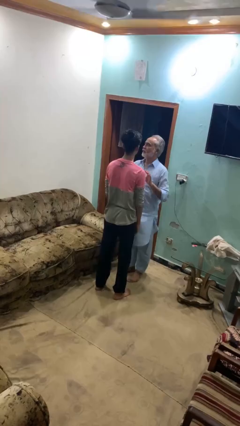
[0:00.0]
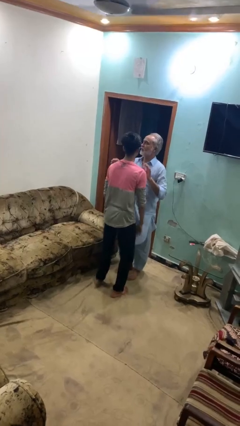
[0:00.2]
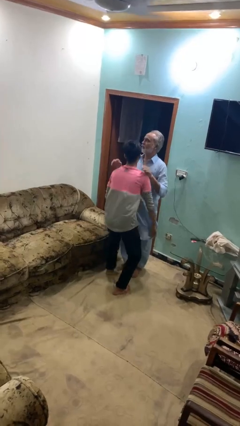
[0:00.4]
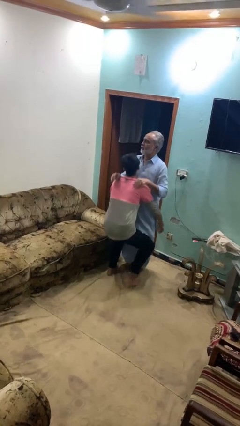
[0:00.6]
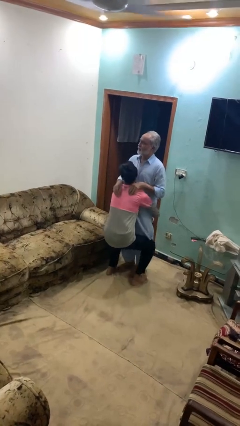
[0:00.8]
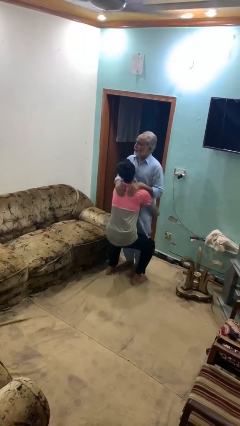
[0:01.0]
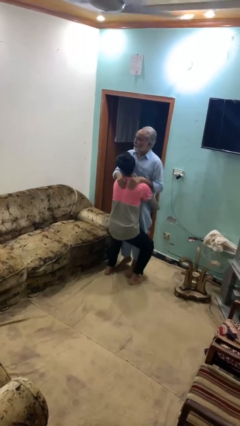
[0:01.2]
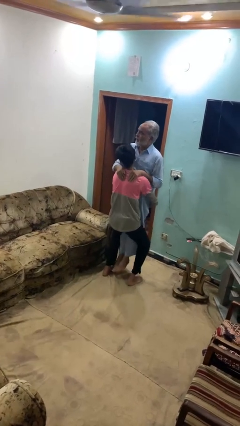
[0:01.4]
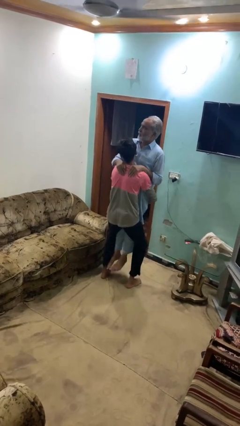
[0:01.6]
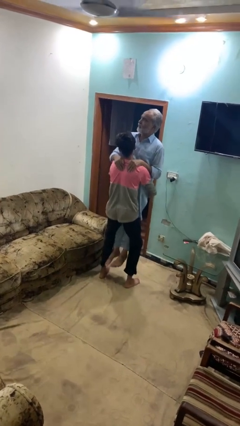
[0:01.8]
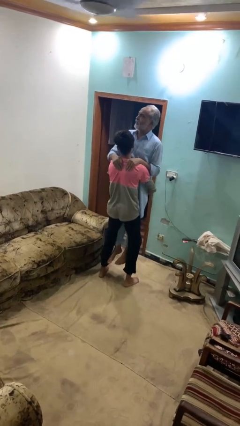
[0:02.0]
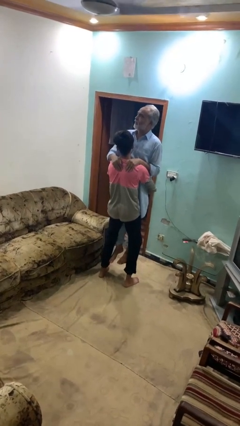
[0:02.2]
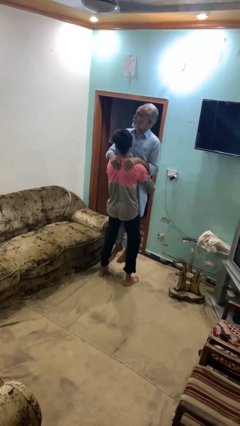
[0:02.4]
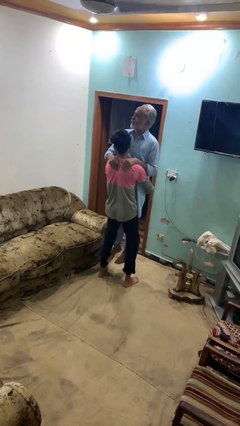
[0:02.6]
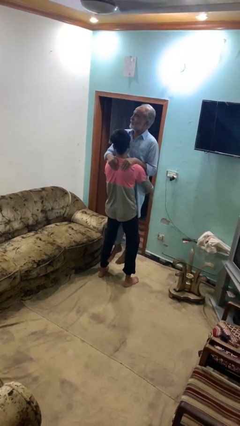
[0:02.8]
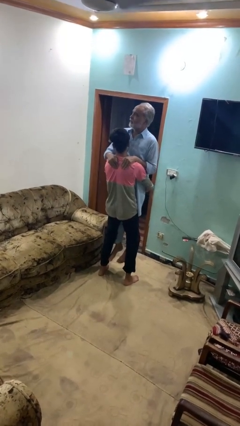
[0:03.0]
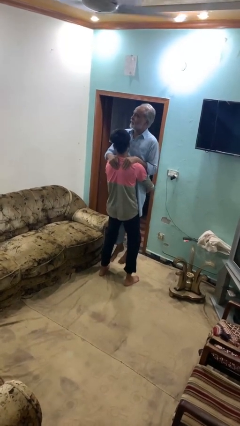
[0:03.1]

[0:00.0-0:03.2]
person picks up person

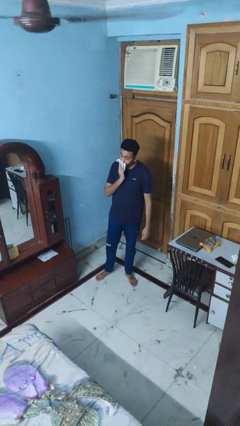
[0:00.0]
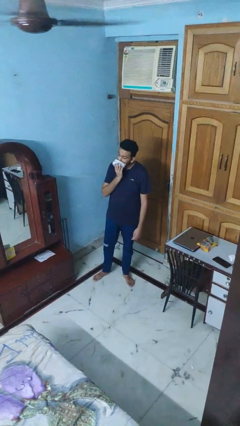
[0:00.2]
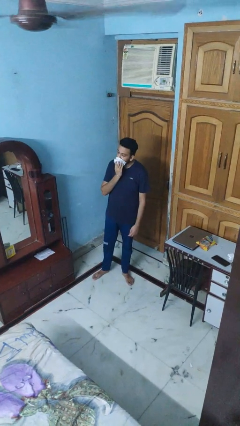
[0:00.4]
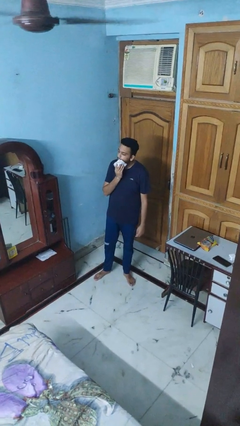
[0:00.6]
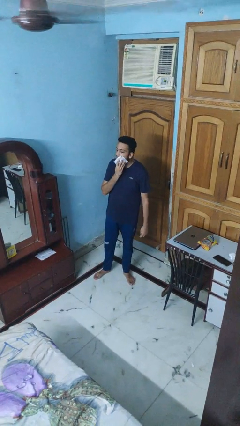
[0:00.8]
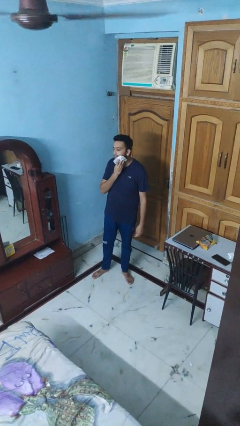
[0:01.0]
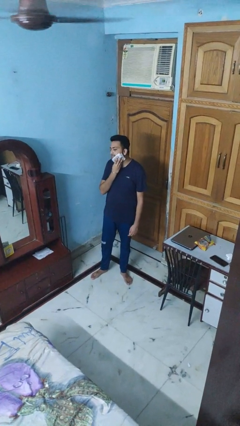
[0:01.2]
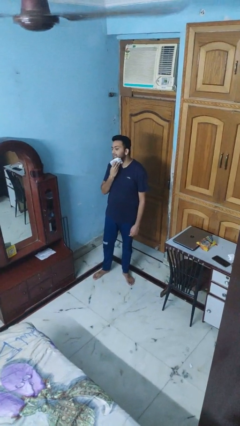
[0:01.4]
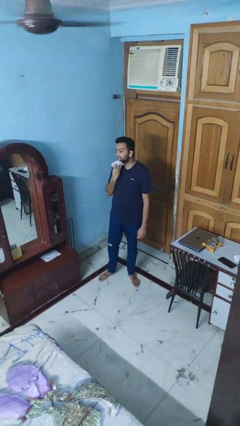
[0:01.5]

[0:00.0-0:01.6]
person wipes mouth with napkin

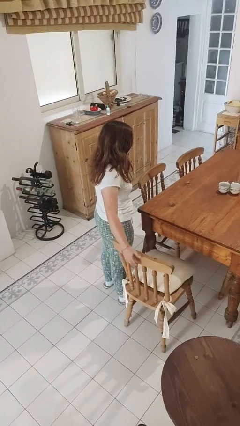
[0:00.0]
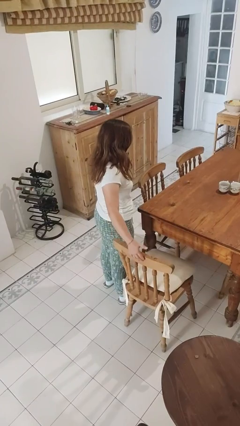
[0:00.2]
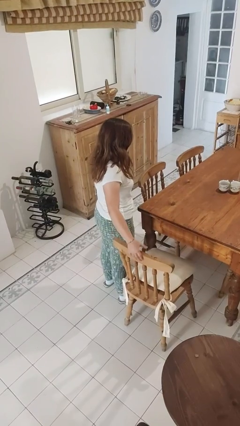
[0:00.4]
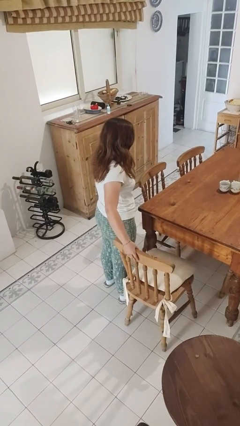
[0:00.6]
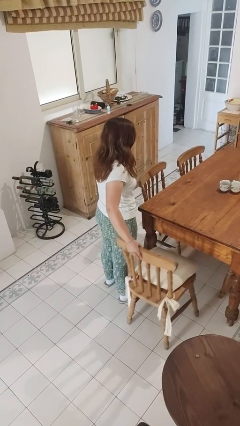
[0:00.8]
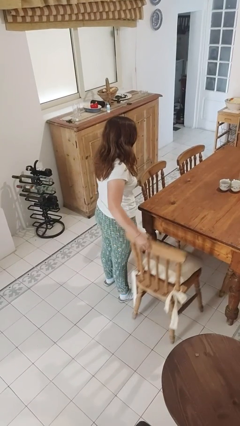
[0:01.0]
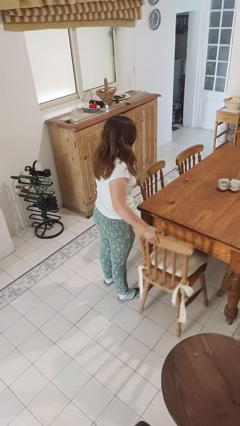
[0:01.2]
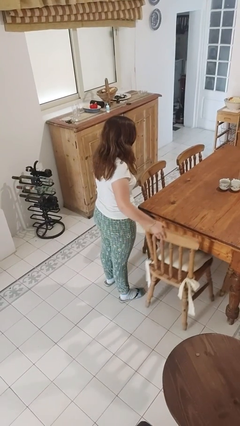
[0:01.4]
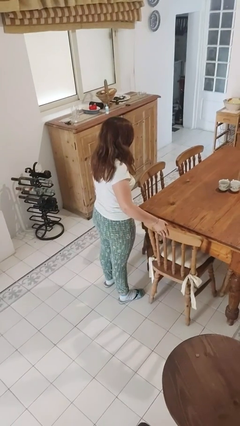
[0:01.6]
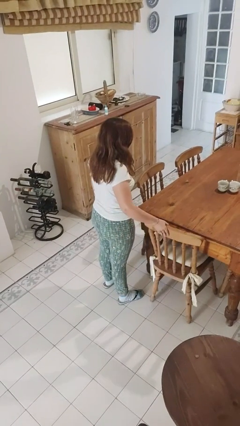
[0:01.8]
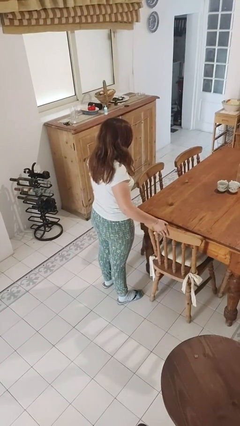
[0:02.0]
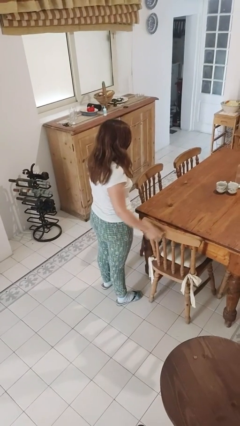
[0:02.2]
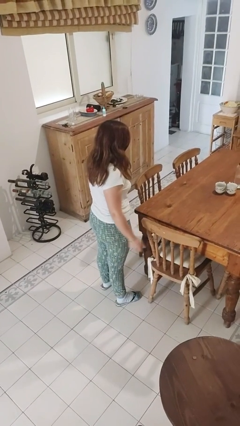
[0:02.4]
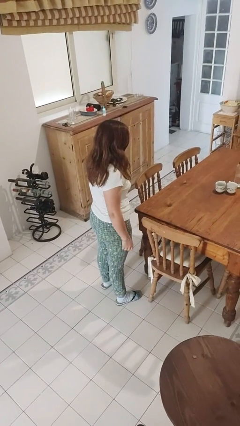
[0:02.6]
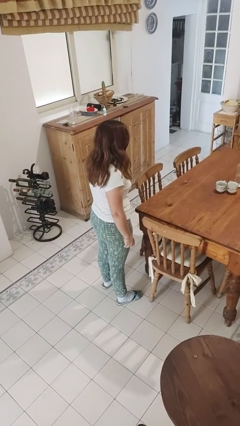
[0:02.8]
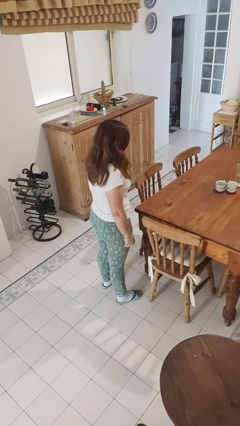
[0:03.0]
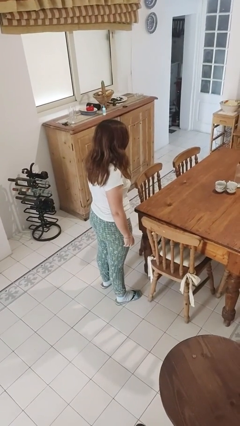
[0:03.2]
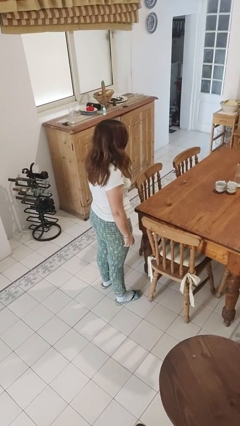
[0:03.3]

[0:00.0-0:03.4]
person pushes in chair

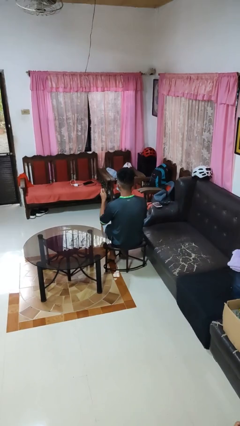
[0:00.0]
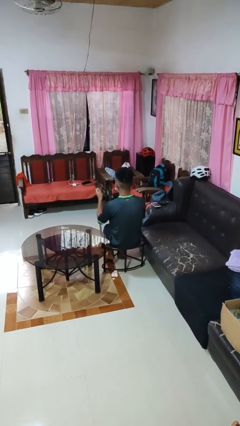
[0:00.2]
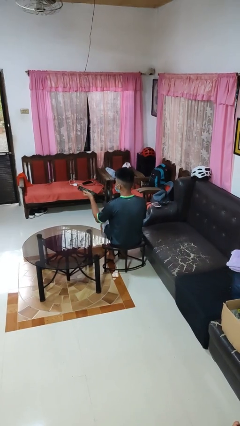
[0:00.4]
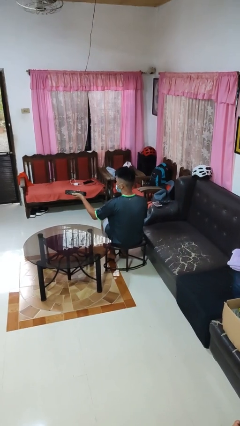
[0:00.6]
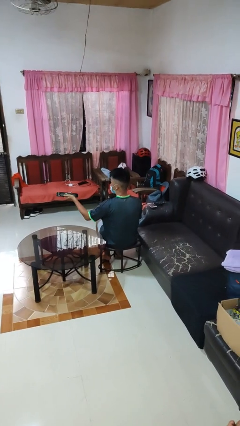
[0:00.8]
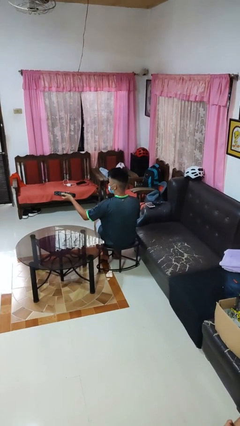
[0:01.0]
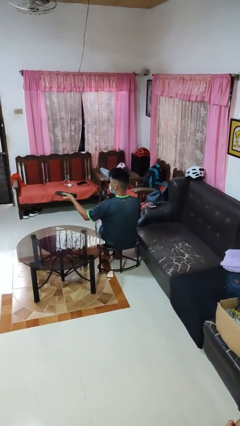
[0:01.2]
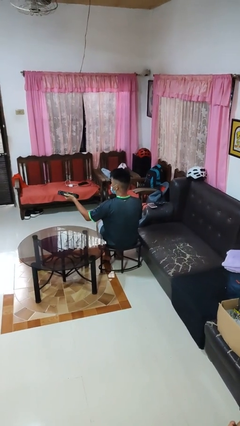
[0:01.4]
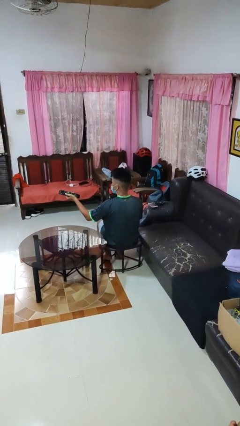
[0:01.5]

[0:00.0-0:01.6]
person uses television remote

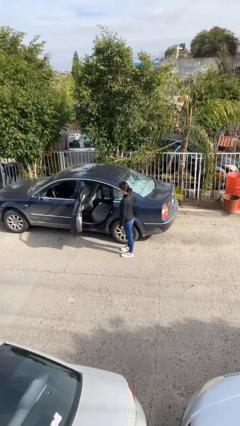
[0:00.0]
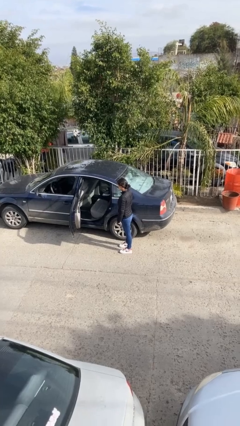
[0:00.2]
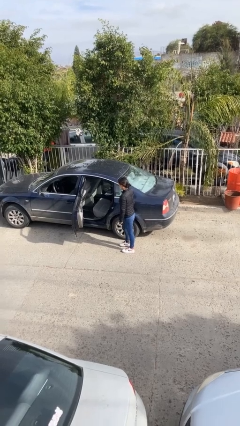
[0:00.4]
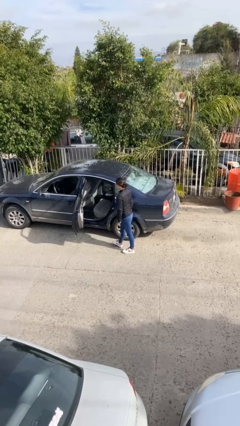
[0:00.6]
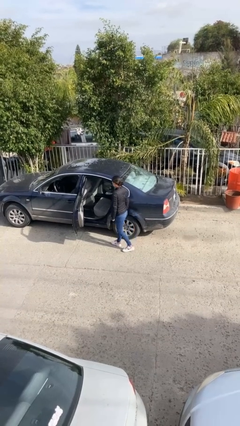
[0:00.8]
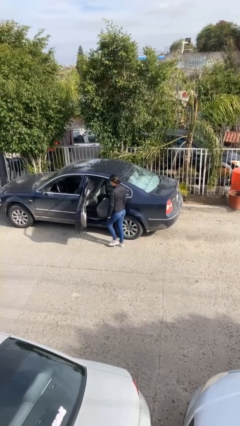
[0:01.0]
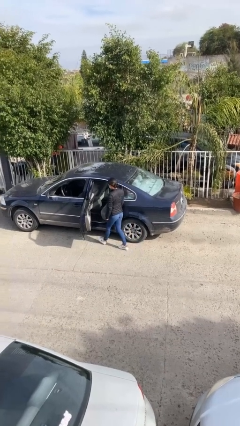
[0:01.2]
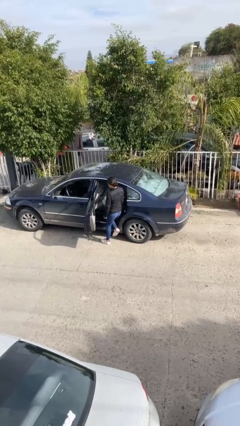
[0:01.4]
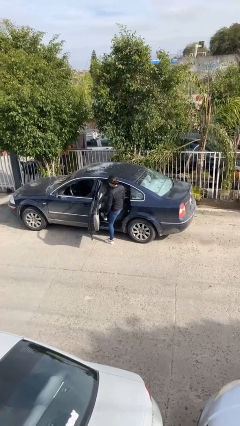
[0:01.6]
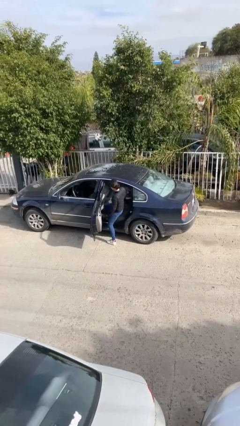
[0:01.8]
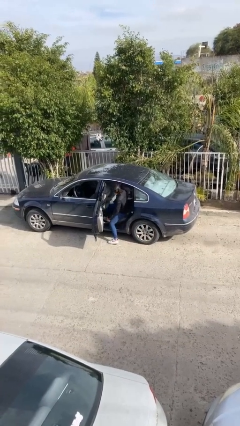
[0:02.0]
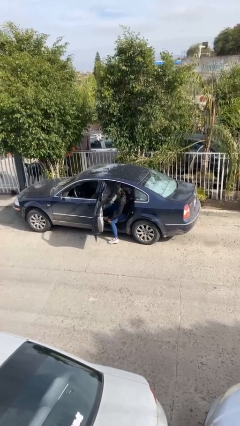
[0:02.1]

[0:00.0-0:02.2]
person enters car

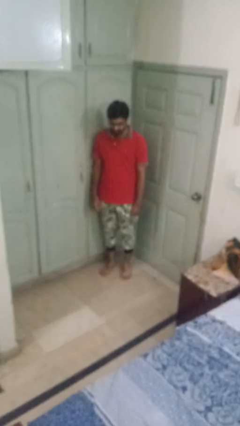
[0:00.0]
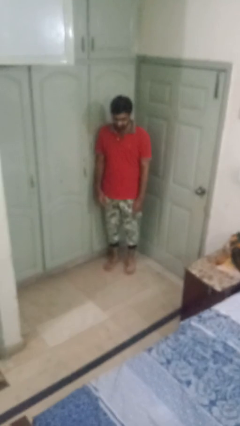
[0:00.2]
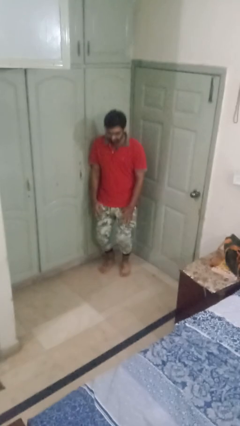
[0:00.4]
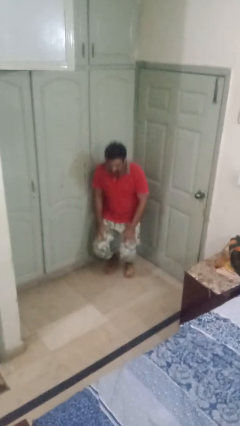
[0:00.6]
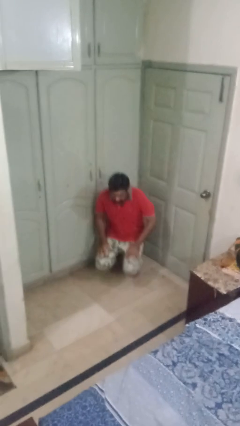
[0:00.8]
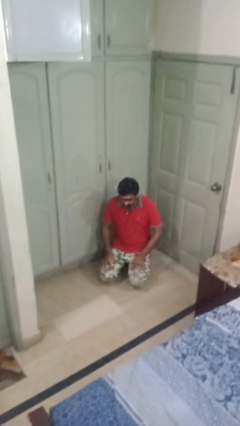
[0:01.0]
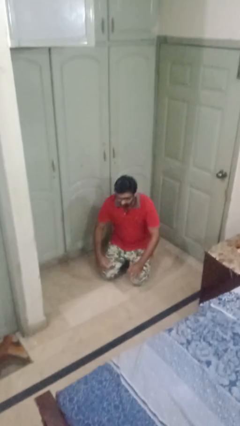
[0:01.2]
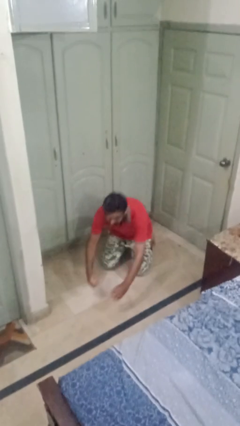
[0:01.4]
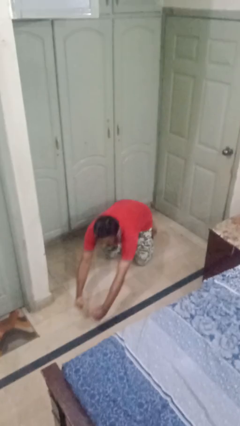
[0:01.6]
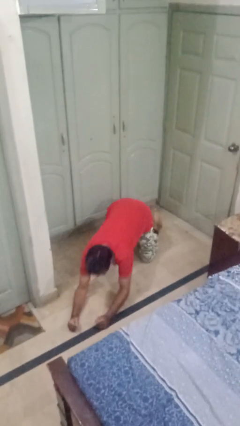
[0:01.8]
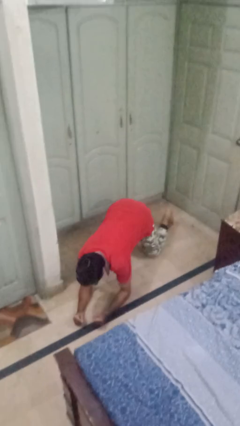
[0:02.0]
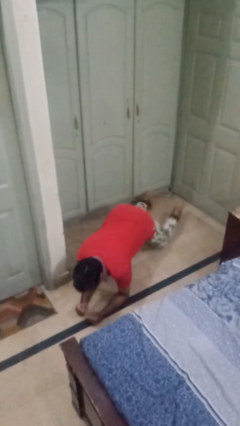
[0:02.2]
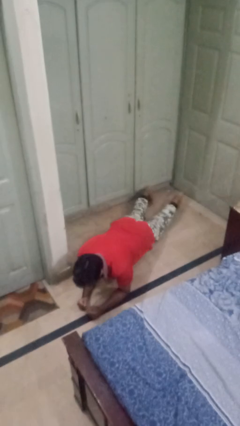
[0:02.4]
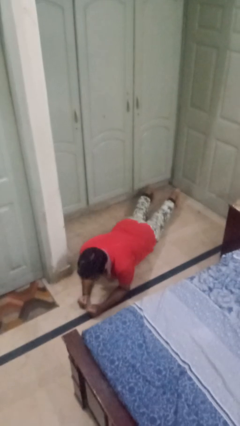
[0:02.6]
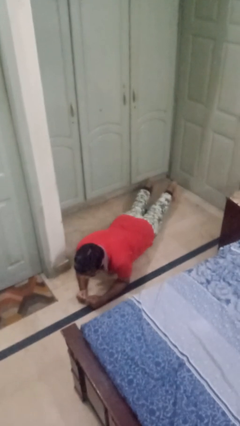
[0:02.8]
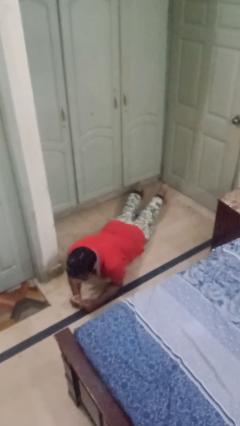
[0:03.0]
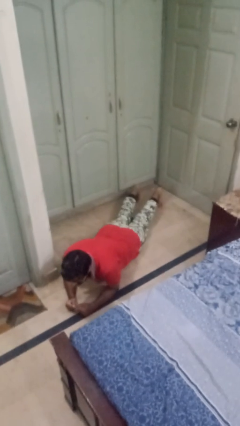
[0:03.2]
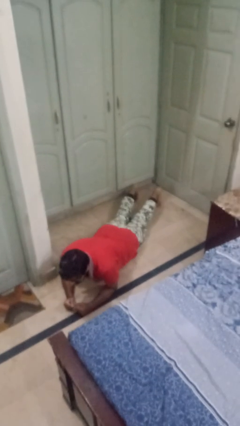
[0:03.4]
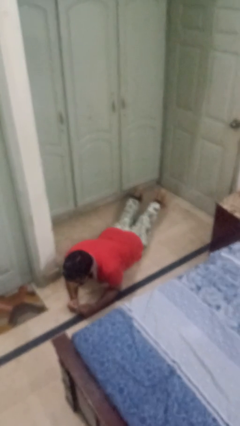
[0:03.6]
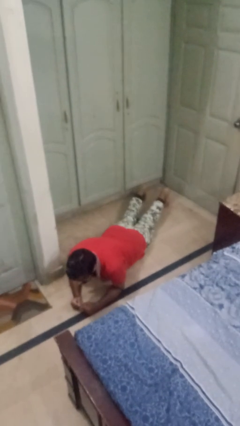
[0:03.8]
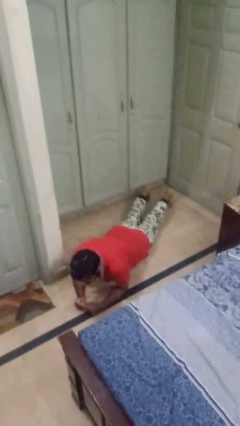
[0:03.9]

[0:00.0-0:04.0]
person exercises with plank

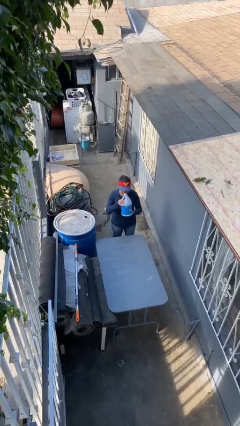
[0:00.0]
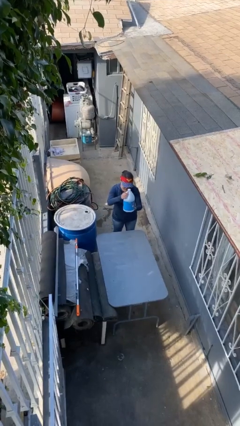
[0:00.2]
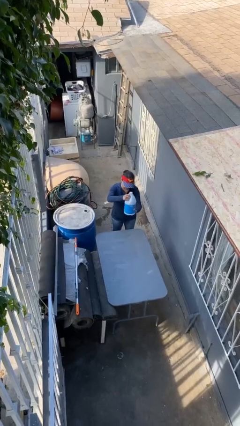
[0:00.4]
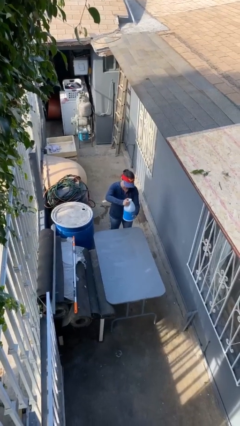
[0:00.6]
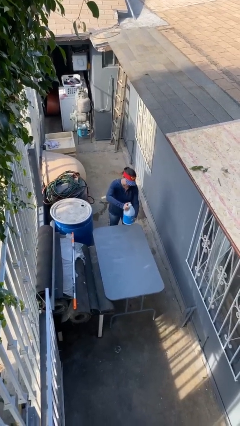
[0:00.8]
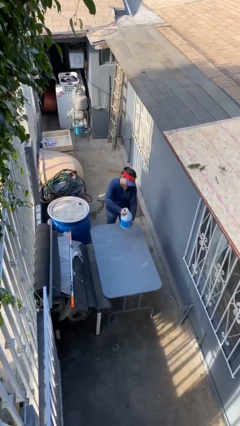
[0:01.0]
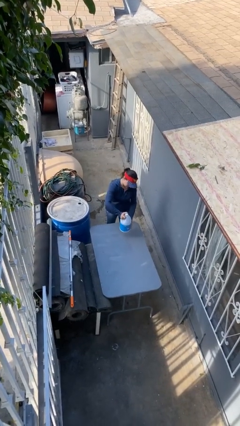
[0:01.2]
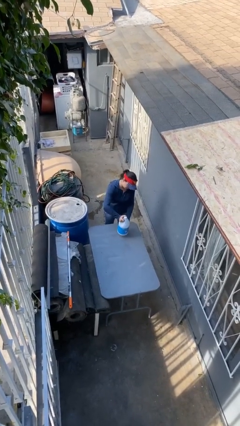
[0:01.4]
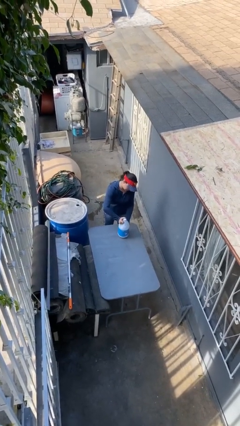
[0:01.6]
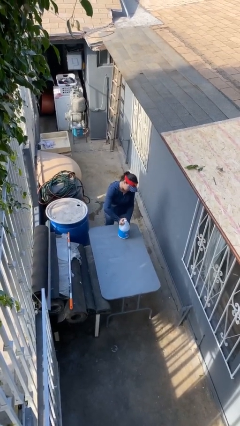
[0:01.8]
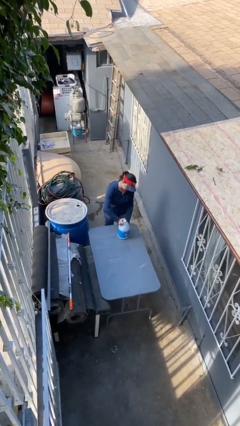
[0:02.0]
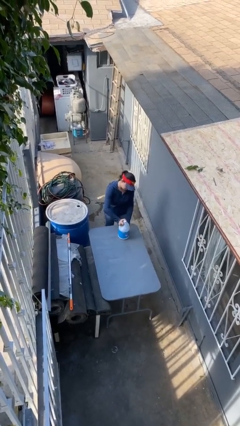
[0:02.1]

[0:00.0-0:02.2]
person puts down object on table
